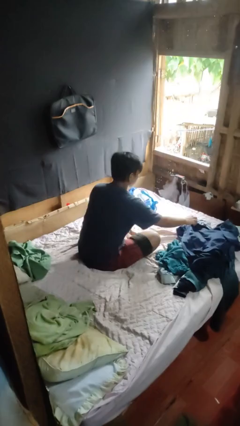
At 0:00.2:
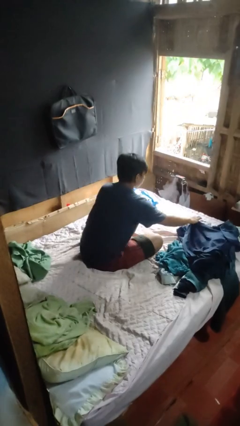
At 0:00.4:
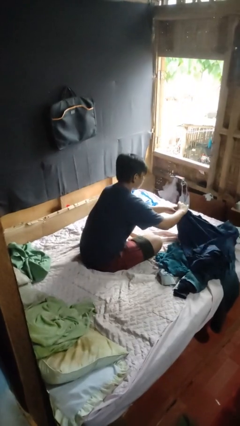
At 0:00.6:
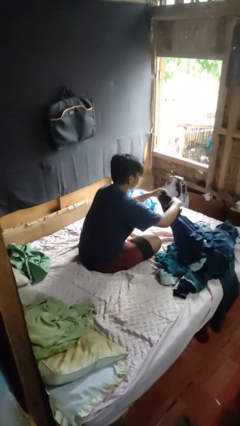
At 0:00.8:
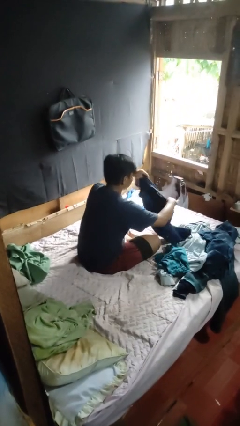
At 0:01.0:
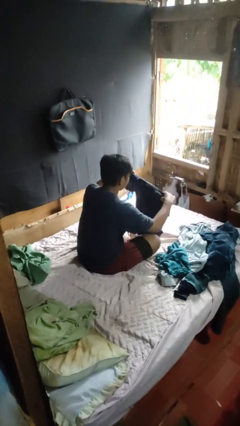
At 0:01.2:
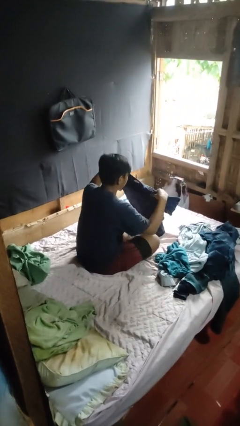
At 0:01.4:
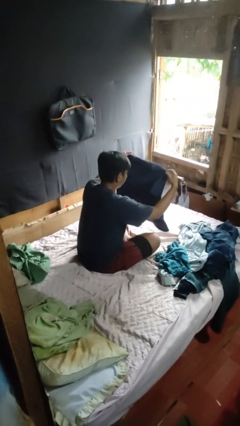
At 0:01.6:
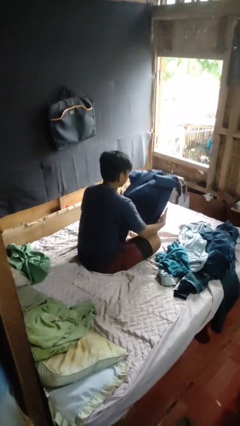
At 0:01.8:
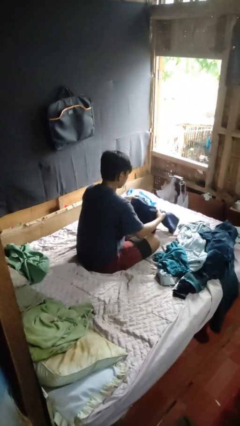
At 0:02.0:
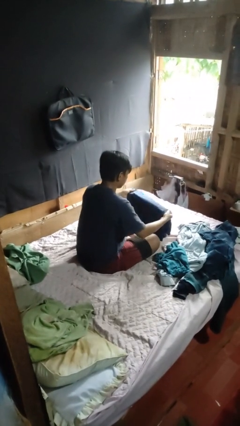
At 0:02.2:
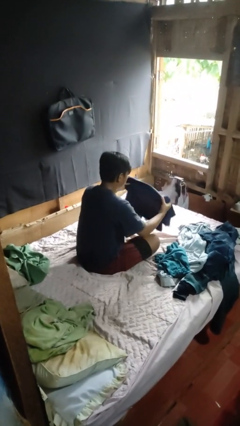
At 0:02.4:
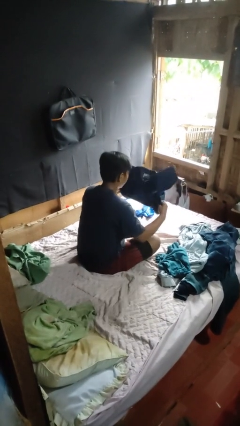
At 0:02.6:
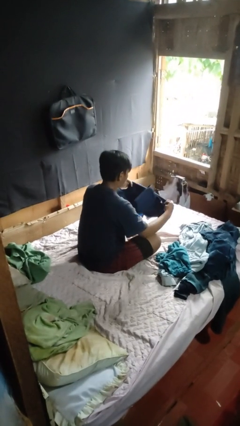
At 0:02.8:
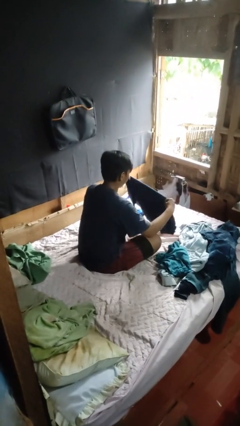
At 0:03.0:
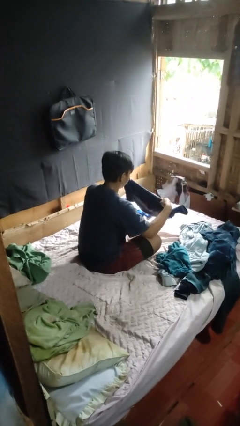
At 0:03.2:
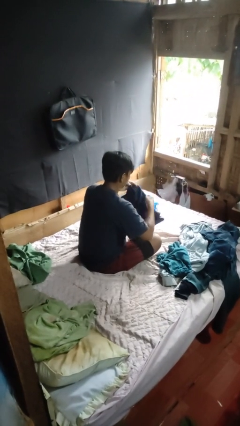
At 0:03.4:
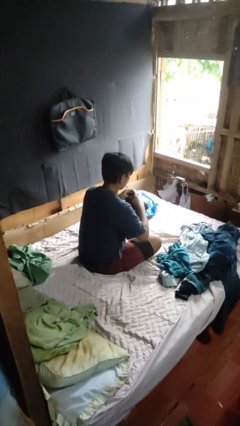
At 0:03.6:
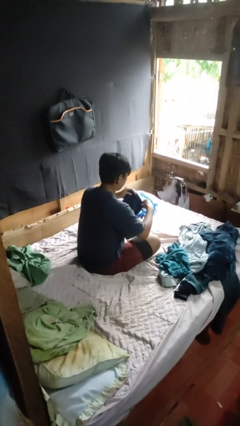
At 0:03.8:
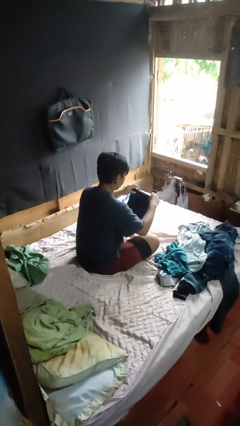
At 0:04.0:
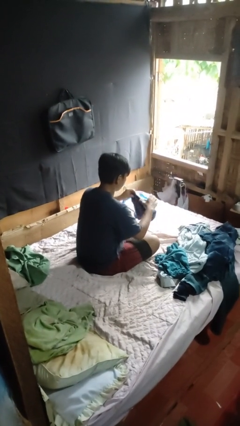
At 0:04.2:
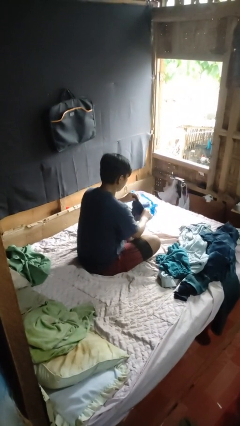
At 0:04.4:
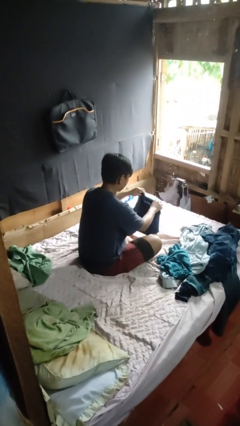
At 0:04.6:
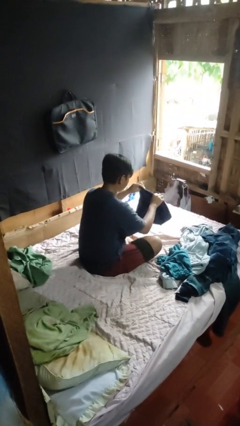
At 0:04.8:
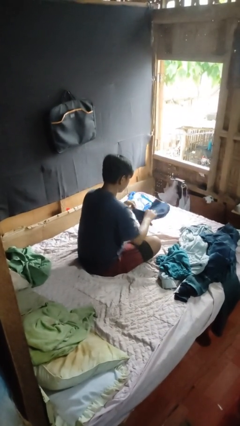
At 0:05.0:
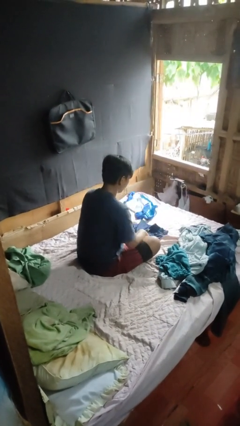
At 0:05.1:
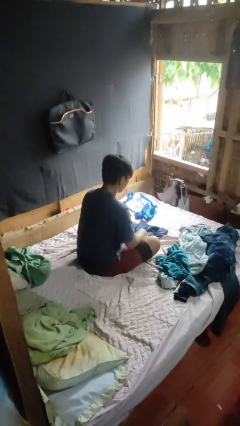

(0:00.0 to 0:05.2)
person folds shirt

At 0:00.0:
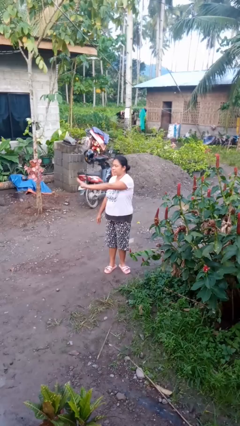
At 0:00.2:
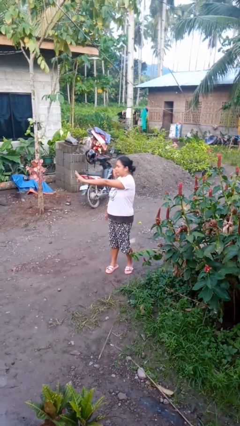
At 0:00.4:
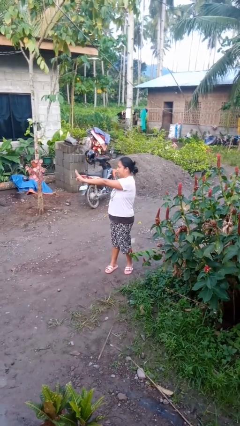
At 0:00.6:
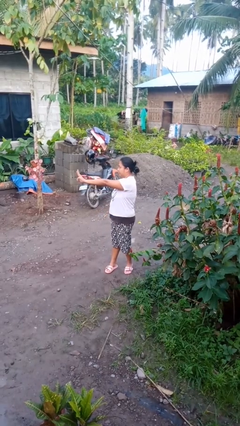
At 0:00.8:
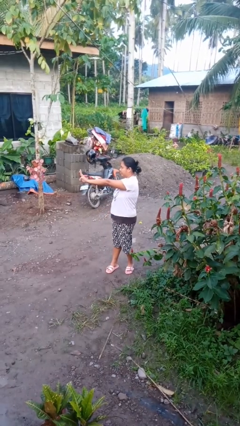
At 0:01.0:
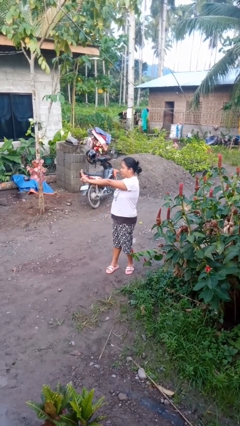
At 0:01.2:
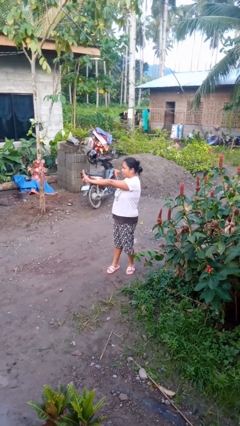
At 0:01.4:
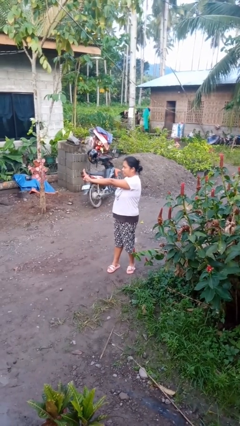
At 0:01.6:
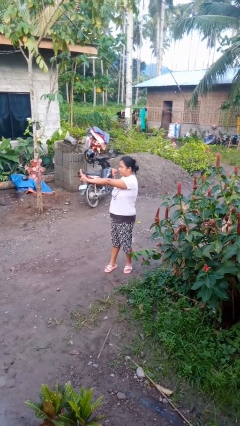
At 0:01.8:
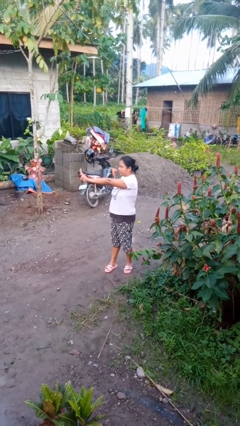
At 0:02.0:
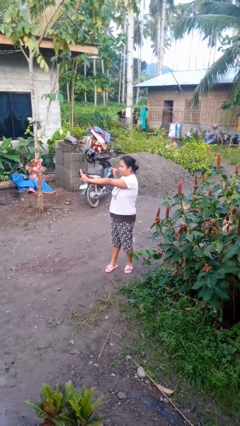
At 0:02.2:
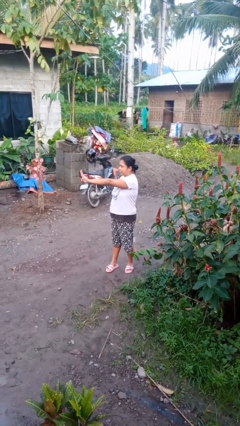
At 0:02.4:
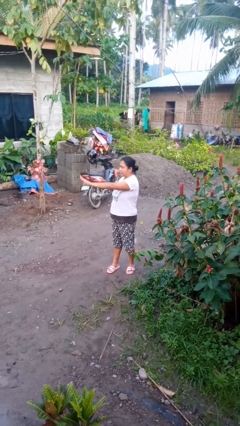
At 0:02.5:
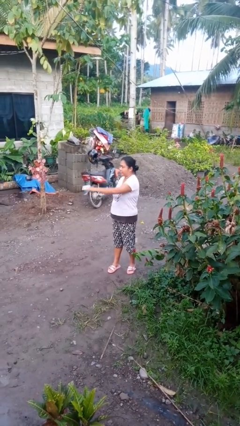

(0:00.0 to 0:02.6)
person gestures number three

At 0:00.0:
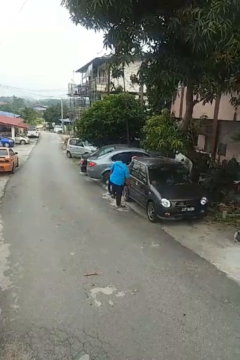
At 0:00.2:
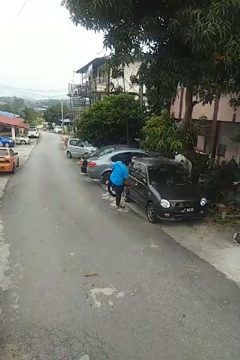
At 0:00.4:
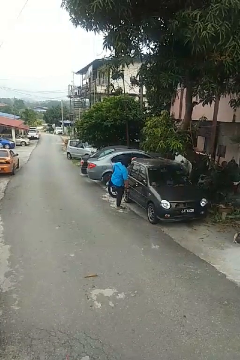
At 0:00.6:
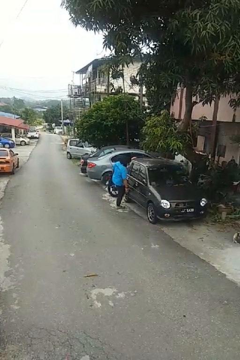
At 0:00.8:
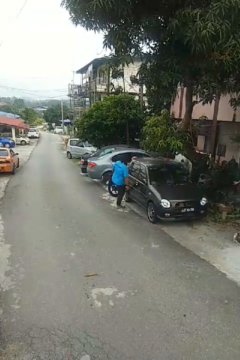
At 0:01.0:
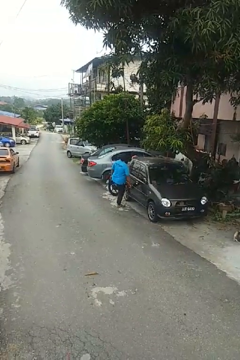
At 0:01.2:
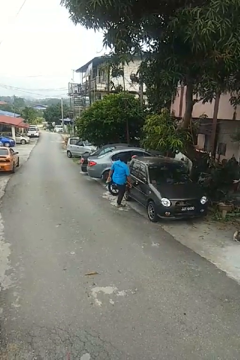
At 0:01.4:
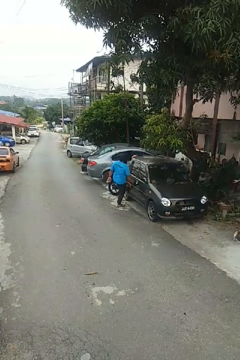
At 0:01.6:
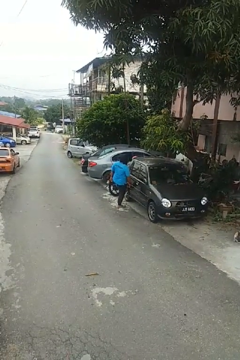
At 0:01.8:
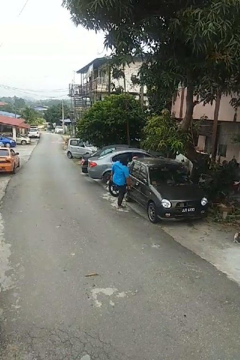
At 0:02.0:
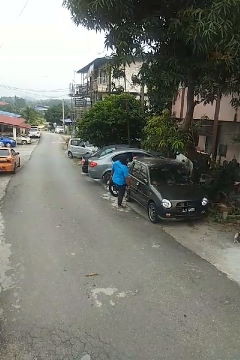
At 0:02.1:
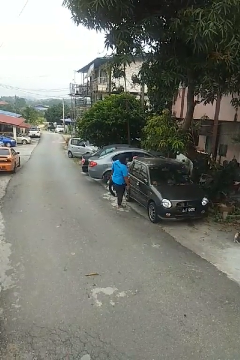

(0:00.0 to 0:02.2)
person kicks car tires

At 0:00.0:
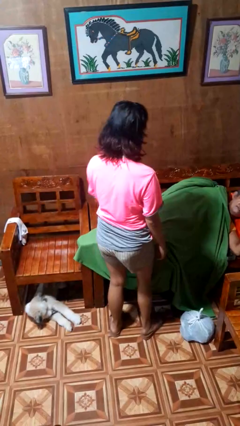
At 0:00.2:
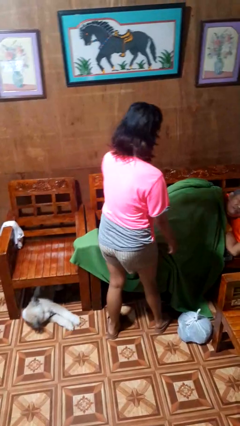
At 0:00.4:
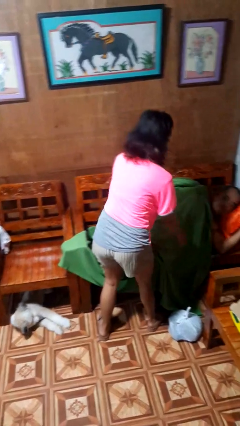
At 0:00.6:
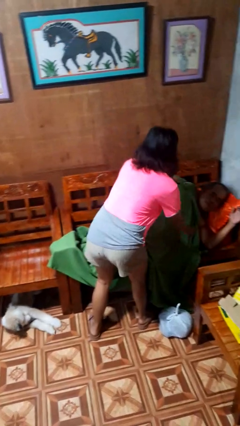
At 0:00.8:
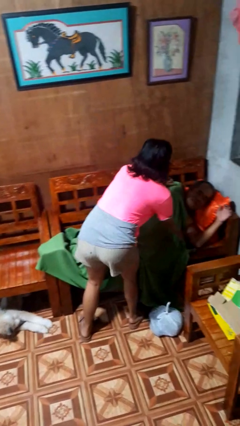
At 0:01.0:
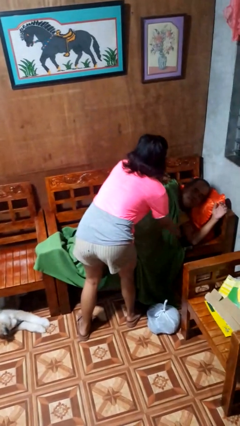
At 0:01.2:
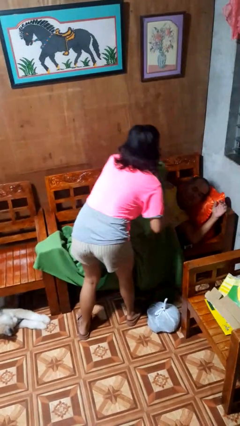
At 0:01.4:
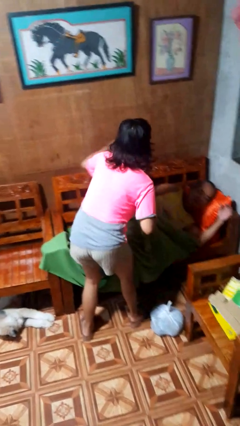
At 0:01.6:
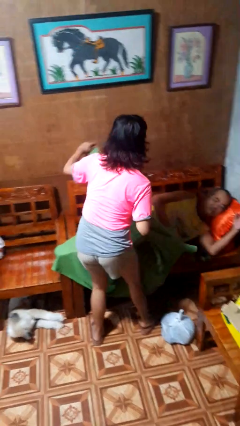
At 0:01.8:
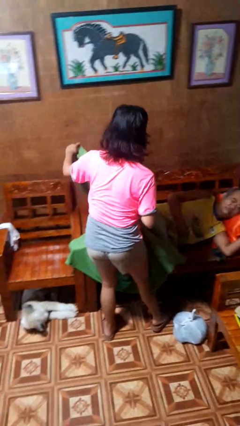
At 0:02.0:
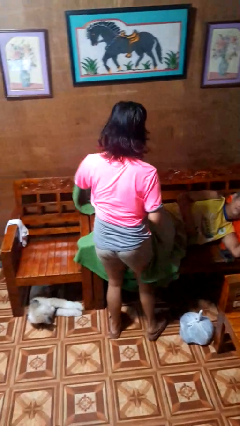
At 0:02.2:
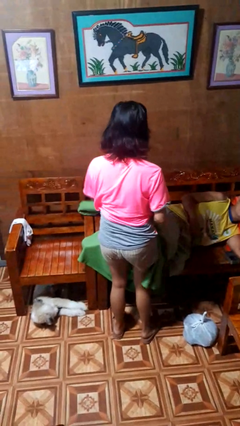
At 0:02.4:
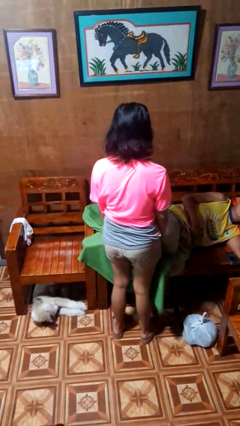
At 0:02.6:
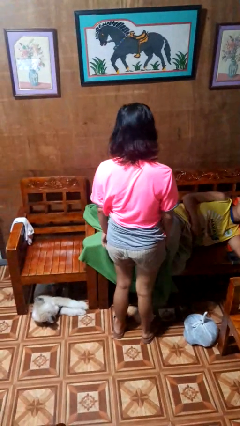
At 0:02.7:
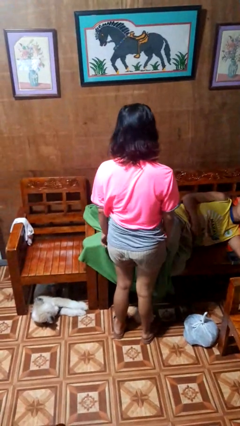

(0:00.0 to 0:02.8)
person uncovers friend with blanket

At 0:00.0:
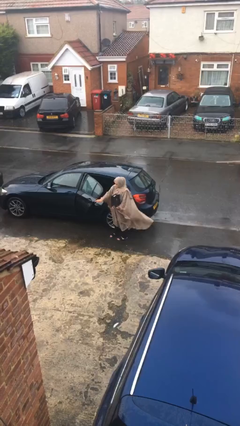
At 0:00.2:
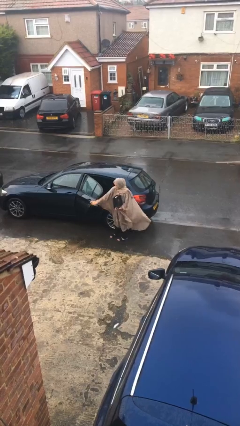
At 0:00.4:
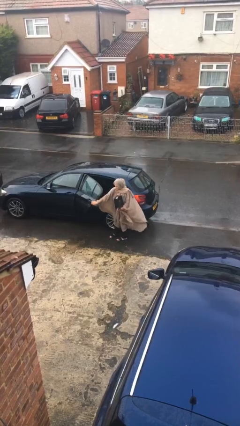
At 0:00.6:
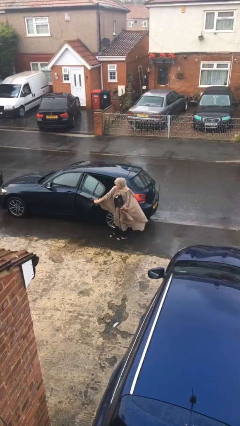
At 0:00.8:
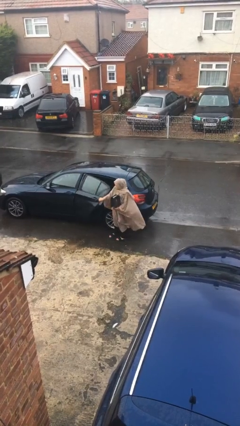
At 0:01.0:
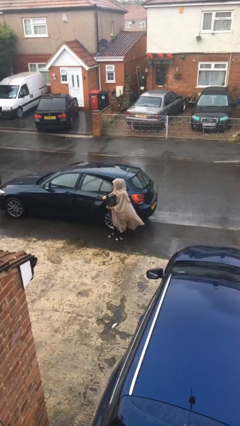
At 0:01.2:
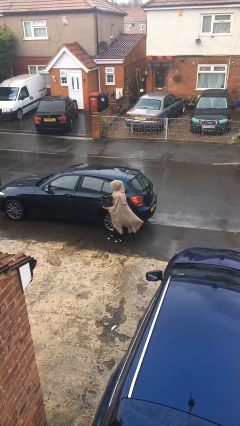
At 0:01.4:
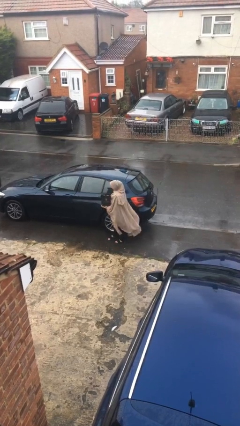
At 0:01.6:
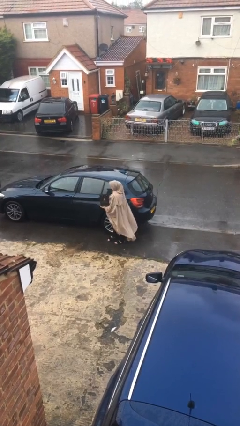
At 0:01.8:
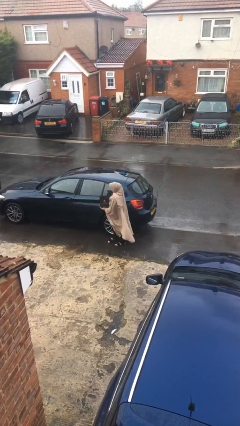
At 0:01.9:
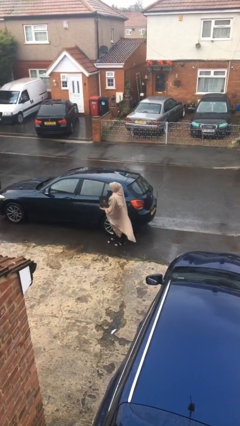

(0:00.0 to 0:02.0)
person closes car door

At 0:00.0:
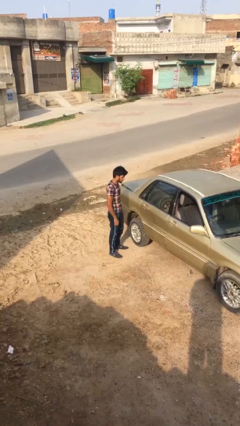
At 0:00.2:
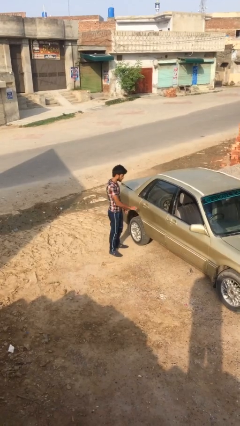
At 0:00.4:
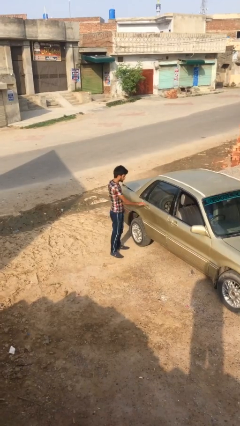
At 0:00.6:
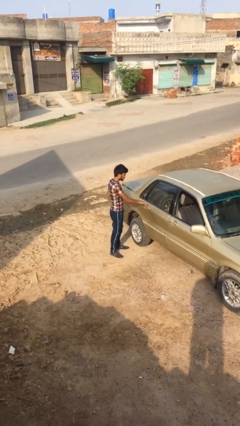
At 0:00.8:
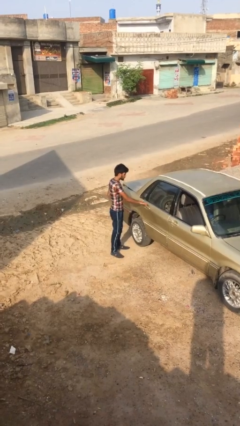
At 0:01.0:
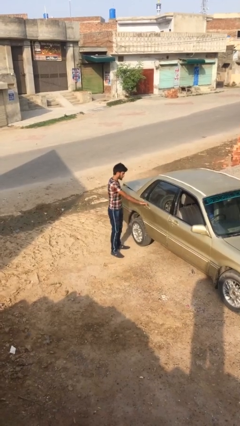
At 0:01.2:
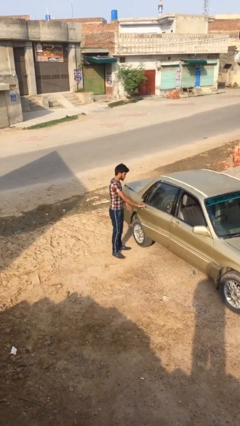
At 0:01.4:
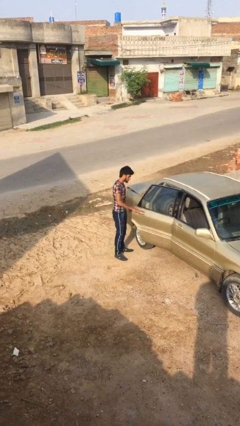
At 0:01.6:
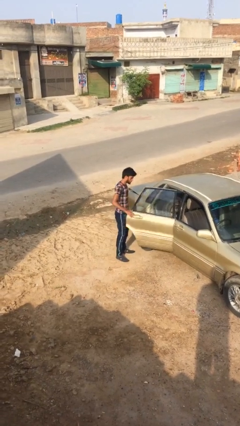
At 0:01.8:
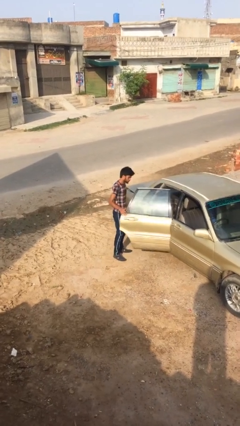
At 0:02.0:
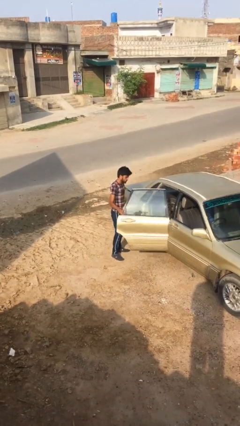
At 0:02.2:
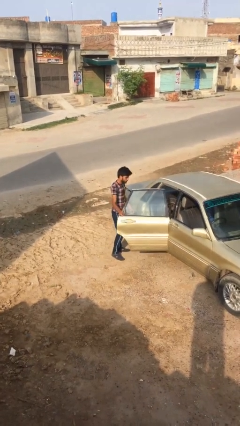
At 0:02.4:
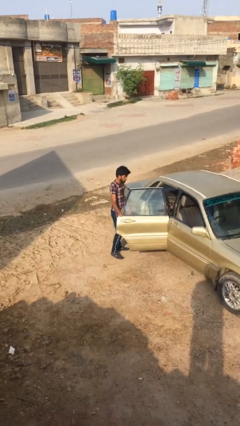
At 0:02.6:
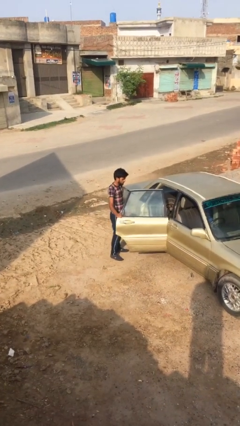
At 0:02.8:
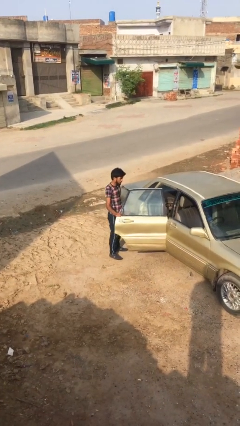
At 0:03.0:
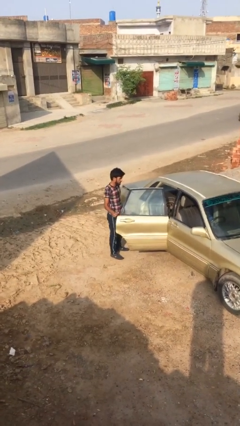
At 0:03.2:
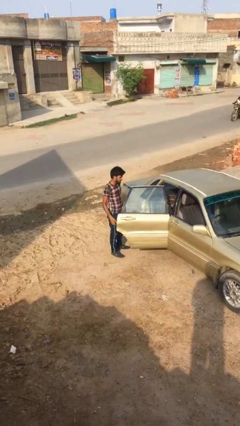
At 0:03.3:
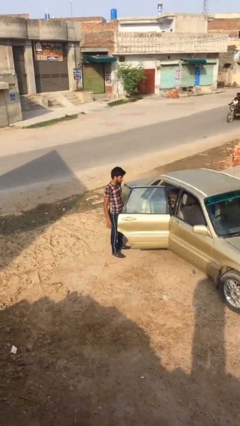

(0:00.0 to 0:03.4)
person opens car door
